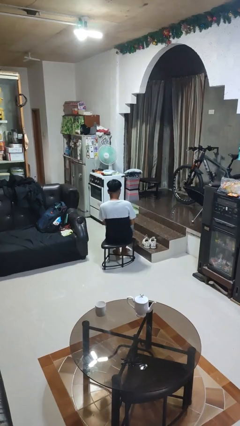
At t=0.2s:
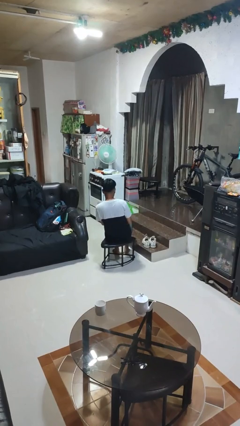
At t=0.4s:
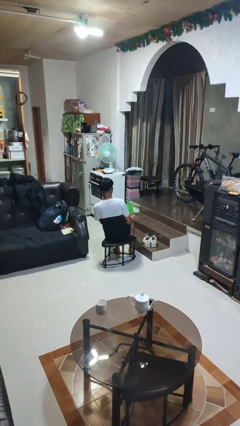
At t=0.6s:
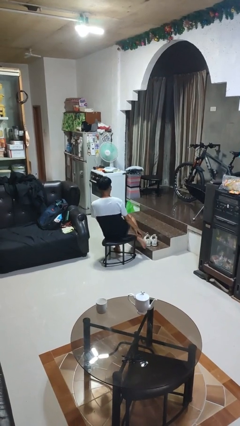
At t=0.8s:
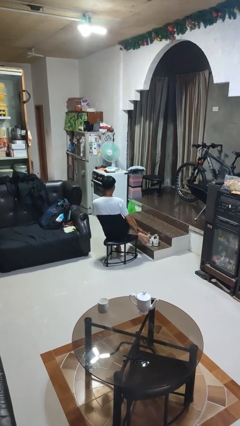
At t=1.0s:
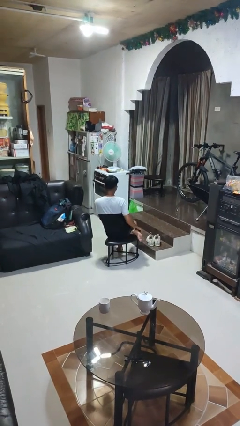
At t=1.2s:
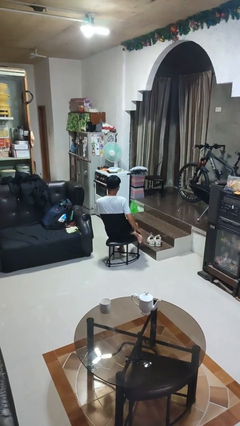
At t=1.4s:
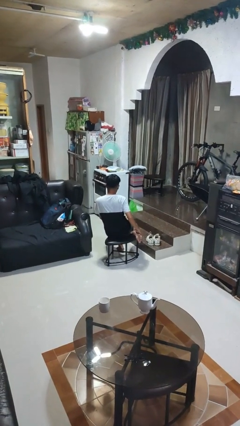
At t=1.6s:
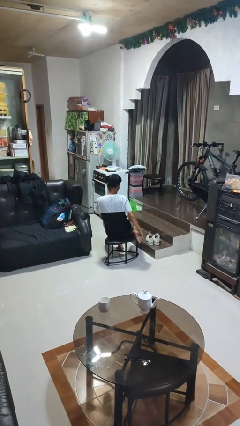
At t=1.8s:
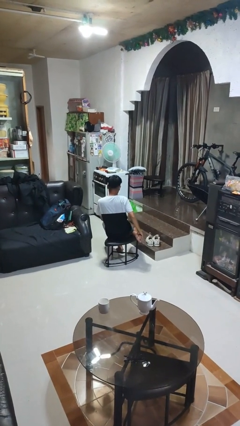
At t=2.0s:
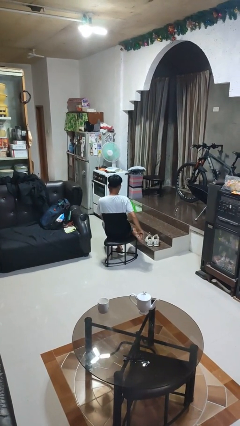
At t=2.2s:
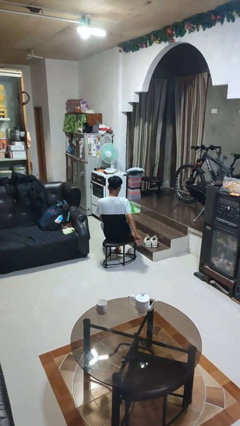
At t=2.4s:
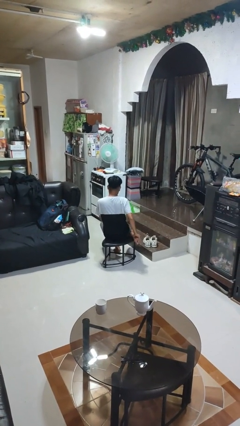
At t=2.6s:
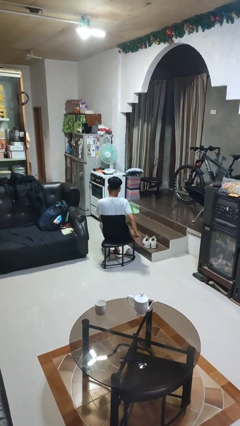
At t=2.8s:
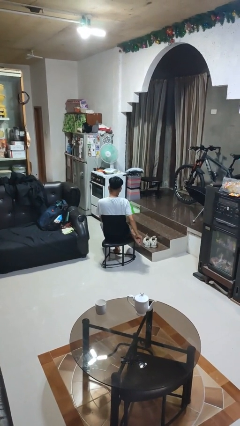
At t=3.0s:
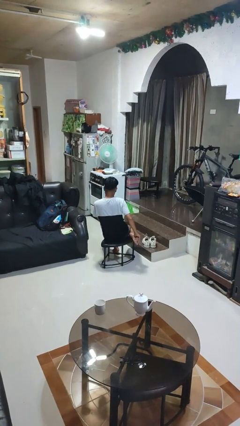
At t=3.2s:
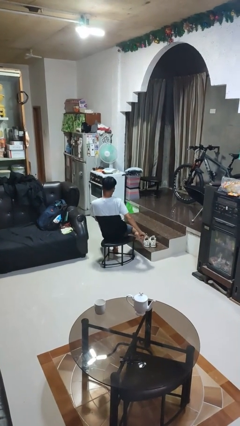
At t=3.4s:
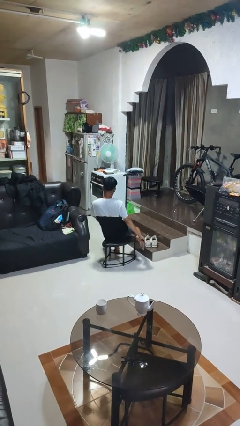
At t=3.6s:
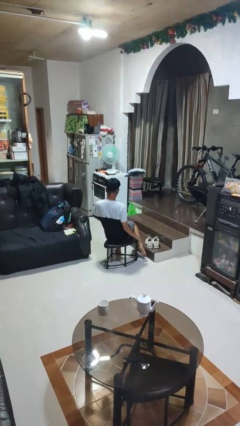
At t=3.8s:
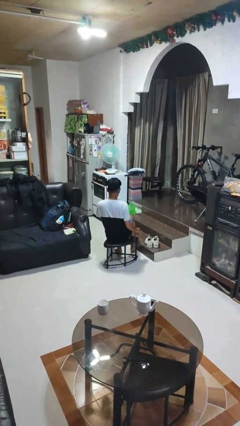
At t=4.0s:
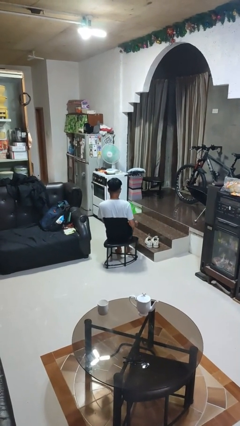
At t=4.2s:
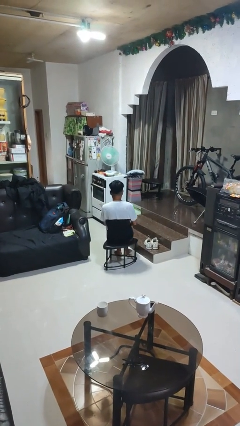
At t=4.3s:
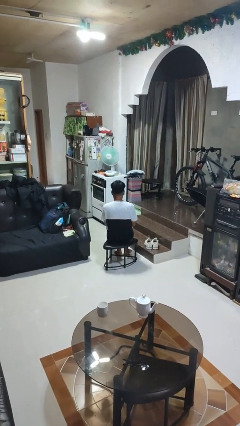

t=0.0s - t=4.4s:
person rubs foot

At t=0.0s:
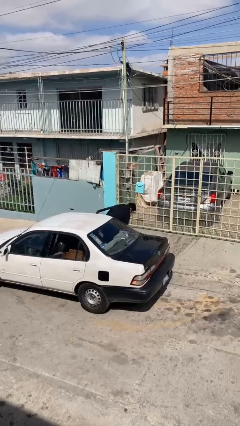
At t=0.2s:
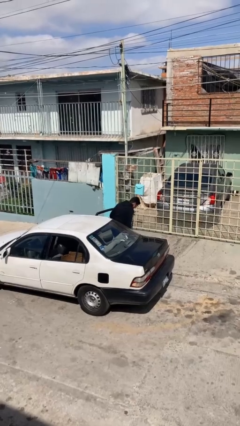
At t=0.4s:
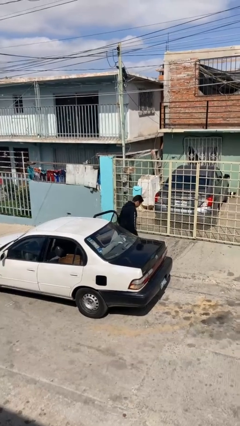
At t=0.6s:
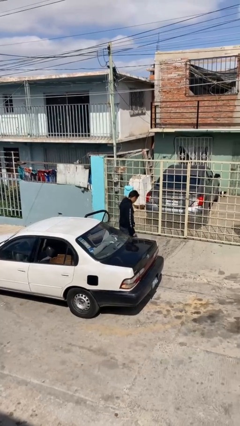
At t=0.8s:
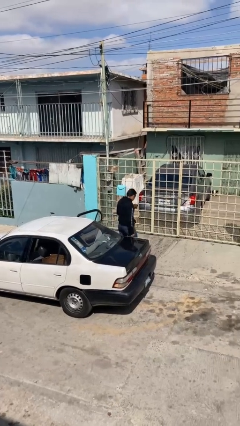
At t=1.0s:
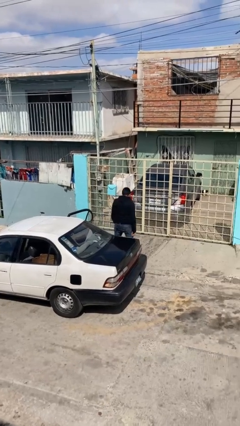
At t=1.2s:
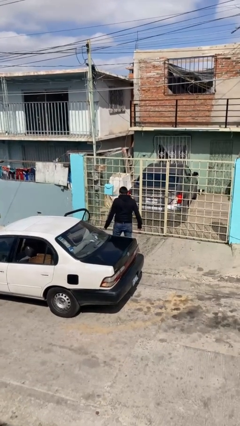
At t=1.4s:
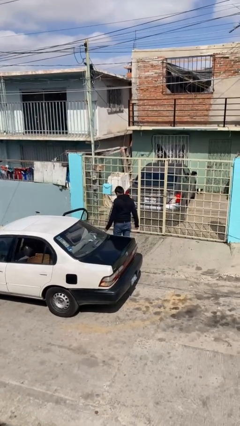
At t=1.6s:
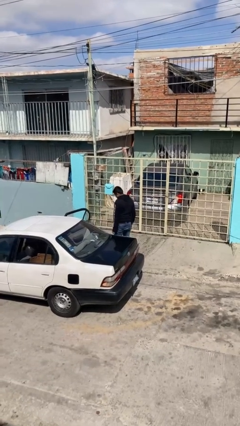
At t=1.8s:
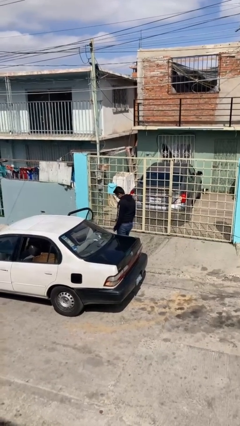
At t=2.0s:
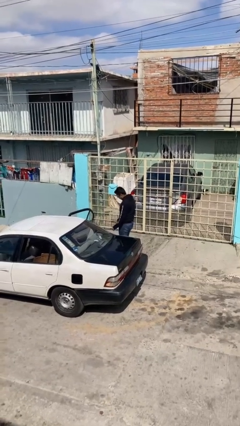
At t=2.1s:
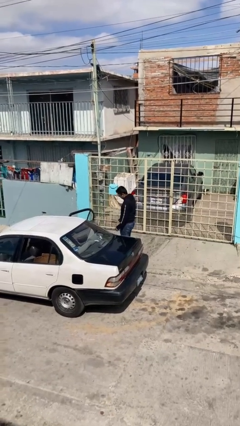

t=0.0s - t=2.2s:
person exits car

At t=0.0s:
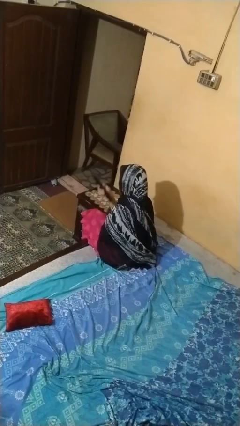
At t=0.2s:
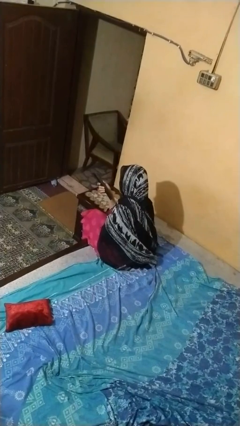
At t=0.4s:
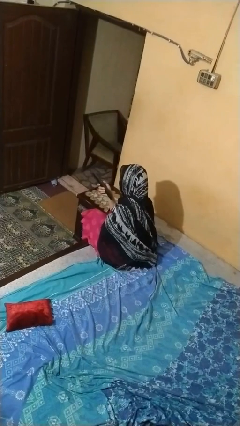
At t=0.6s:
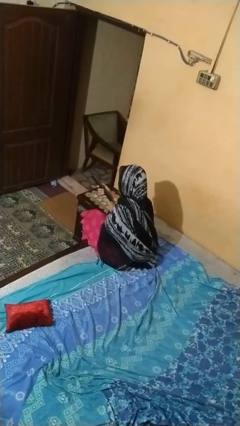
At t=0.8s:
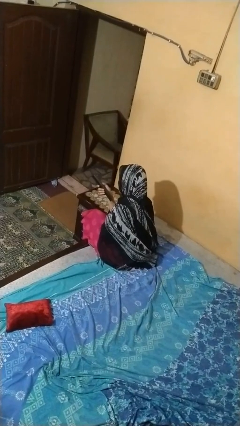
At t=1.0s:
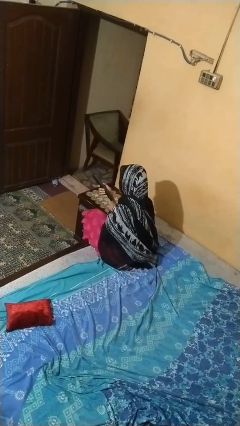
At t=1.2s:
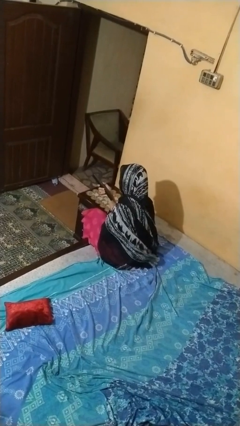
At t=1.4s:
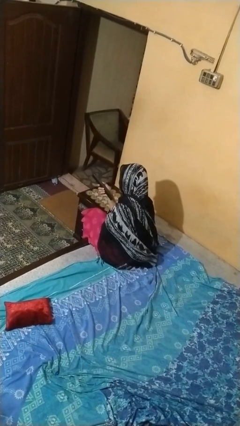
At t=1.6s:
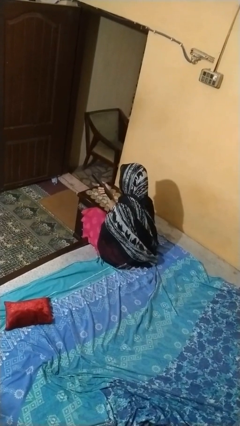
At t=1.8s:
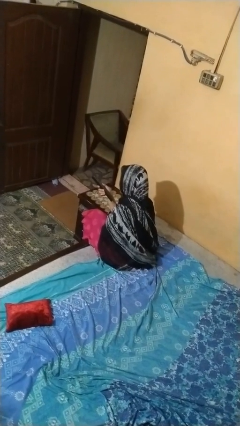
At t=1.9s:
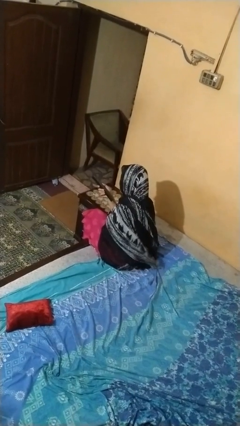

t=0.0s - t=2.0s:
person uses television remote

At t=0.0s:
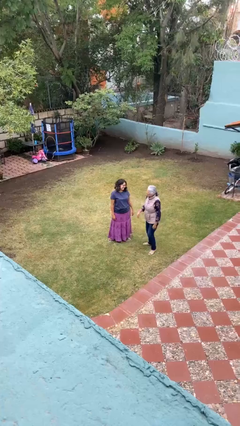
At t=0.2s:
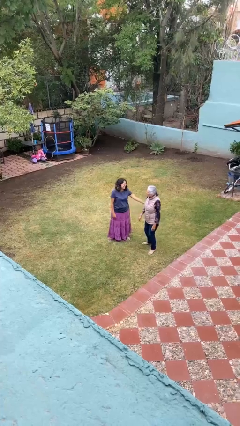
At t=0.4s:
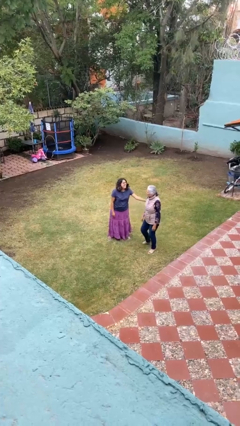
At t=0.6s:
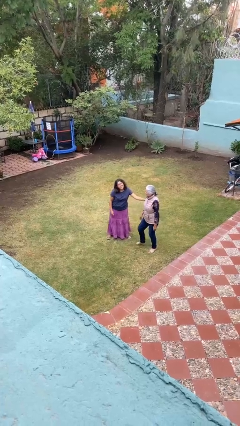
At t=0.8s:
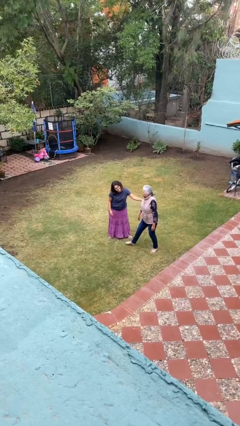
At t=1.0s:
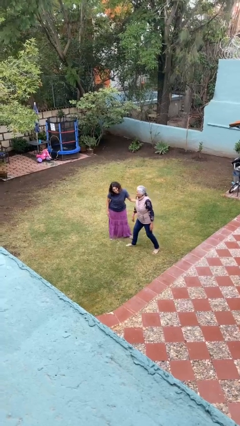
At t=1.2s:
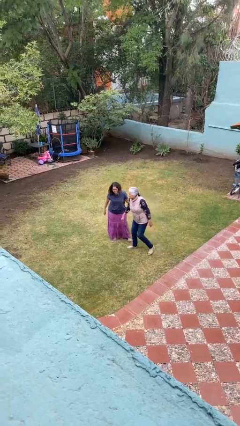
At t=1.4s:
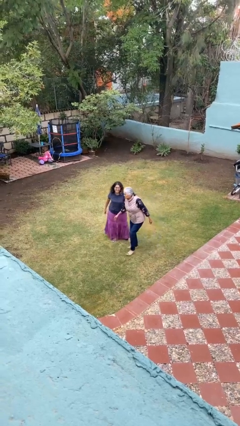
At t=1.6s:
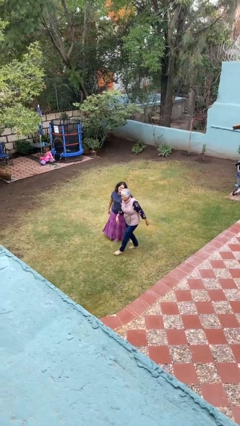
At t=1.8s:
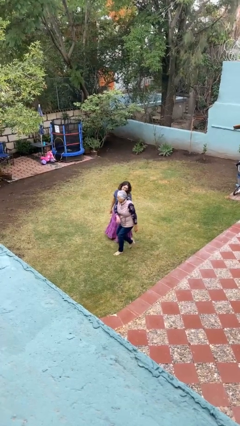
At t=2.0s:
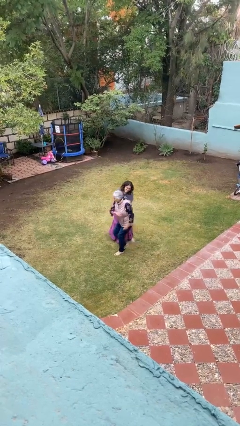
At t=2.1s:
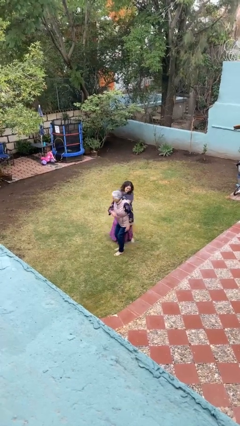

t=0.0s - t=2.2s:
person grabs person by bicep

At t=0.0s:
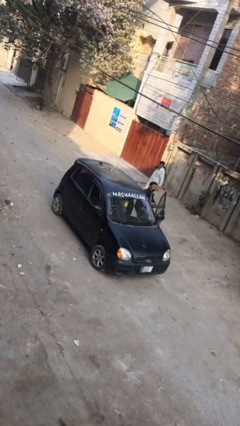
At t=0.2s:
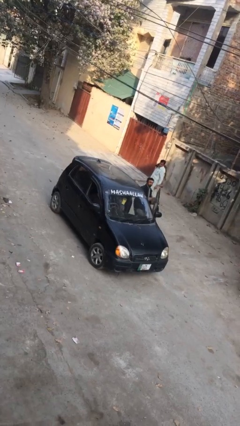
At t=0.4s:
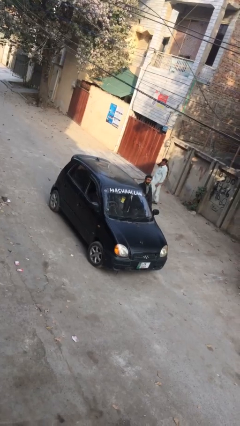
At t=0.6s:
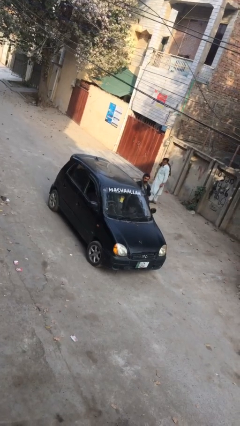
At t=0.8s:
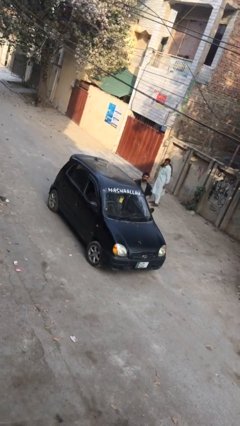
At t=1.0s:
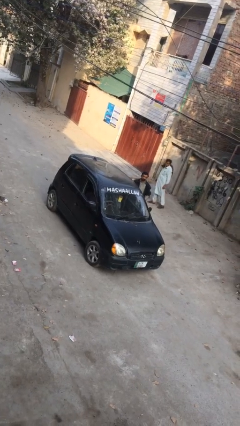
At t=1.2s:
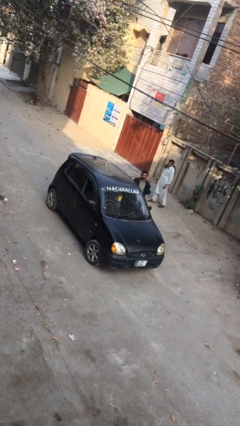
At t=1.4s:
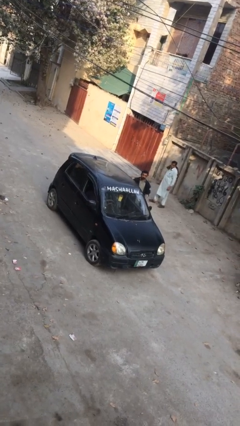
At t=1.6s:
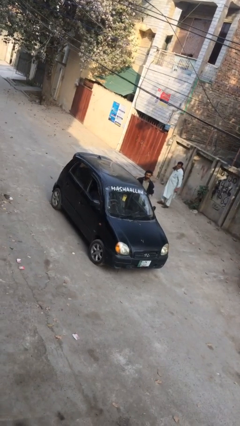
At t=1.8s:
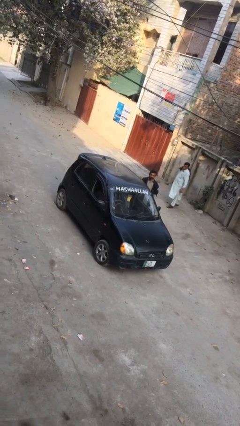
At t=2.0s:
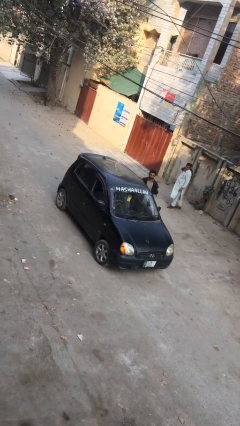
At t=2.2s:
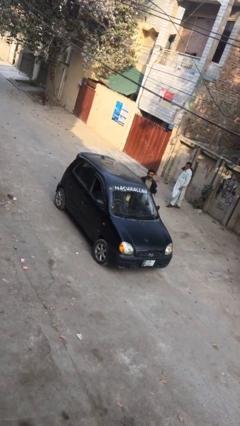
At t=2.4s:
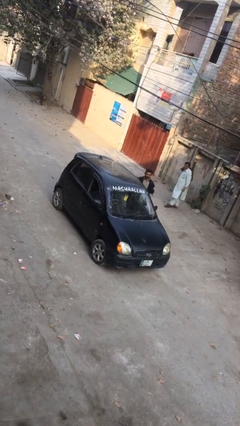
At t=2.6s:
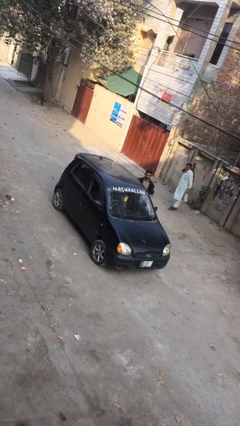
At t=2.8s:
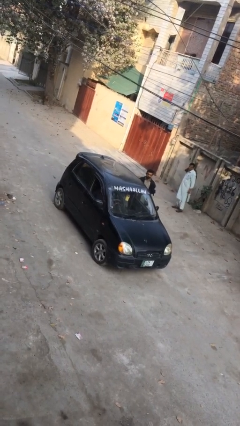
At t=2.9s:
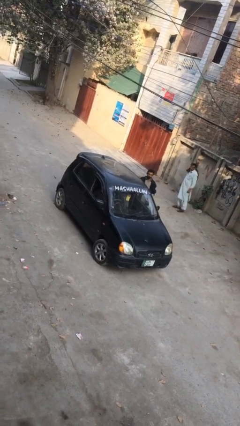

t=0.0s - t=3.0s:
car drops off person

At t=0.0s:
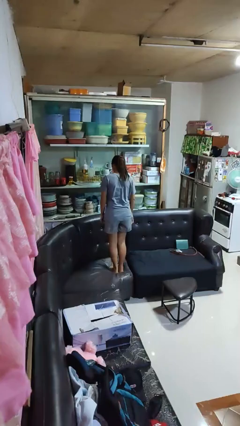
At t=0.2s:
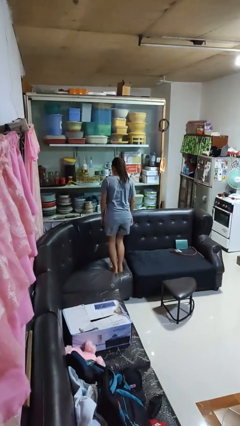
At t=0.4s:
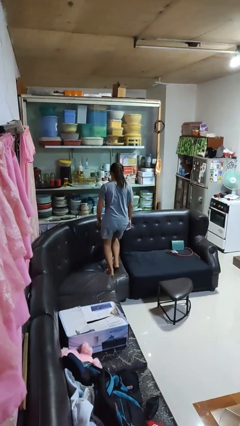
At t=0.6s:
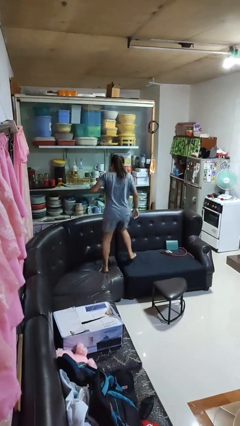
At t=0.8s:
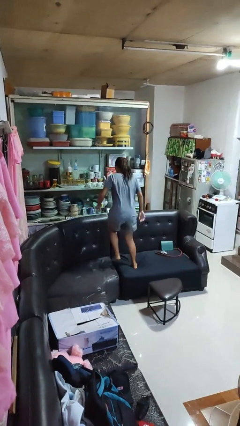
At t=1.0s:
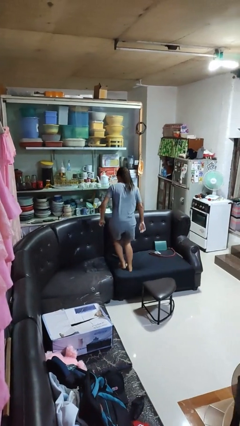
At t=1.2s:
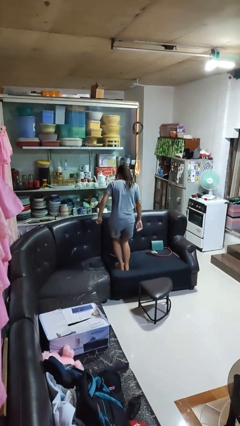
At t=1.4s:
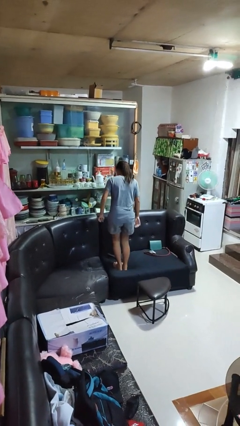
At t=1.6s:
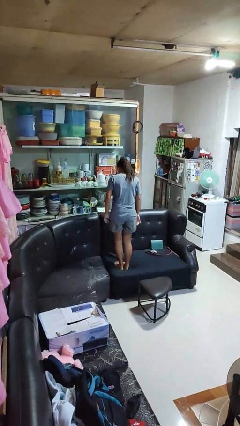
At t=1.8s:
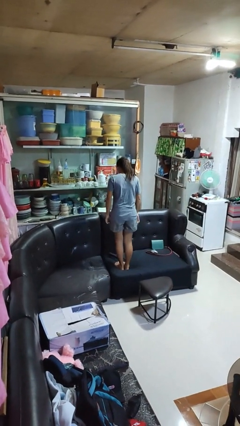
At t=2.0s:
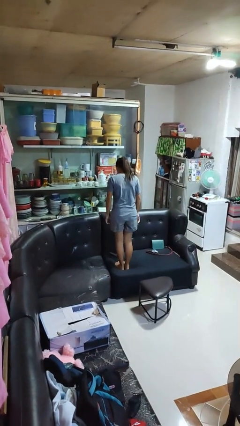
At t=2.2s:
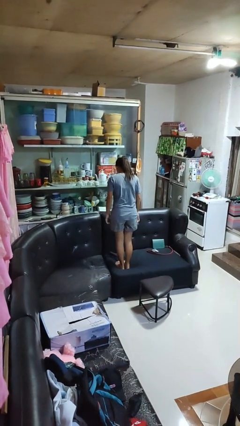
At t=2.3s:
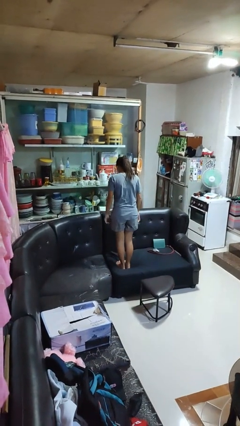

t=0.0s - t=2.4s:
person jumps on couch

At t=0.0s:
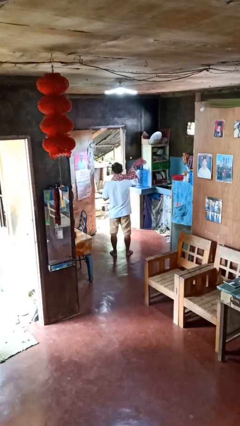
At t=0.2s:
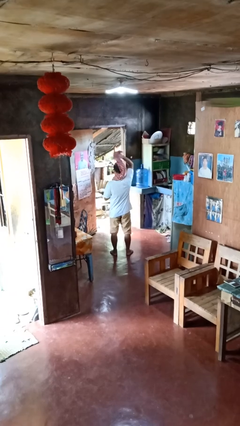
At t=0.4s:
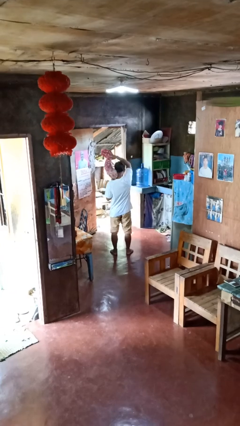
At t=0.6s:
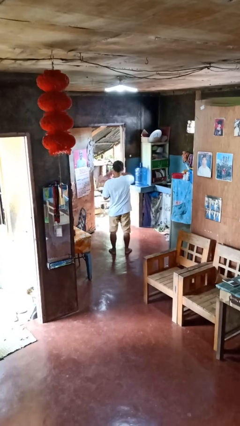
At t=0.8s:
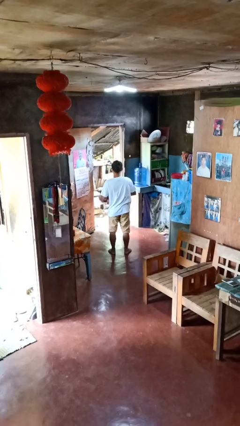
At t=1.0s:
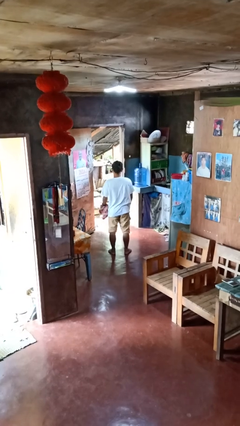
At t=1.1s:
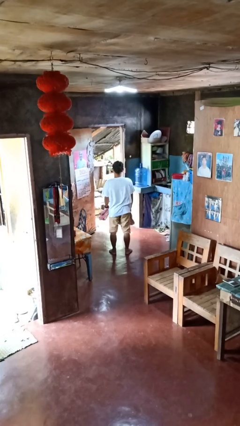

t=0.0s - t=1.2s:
person takes off scarf
